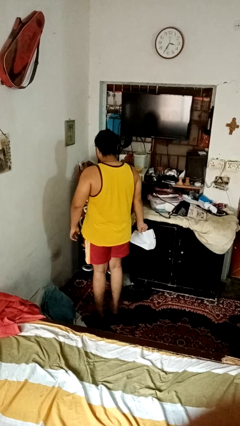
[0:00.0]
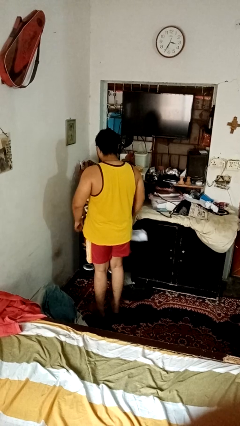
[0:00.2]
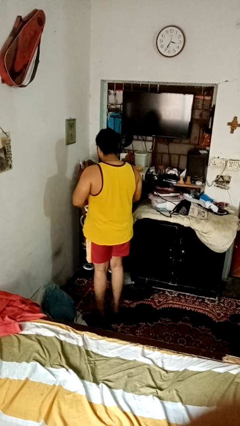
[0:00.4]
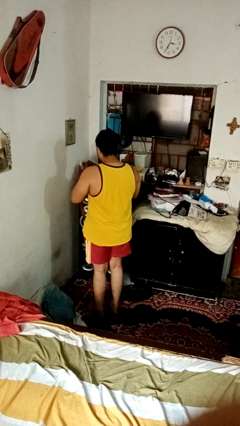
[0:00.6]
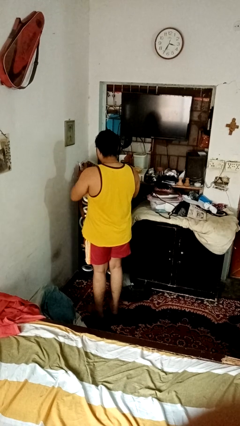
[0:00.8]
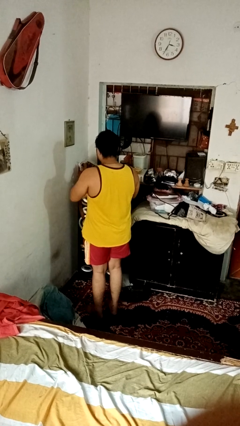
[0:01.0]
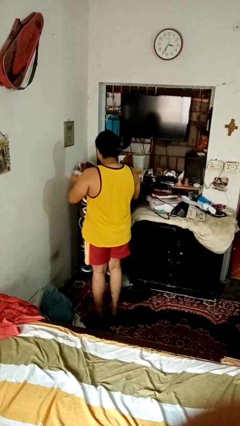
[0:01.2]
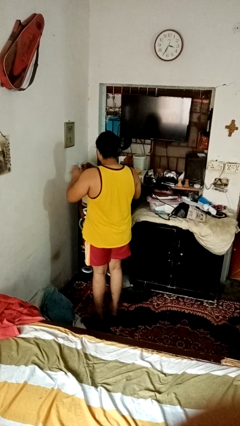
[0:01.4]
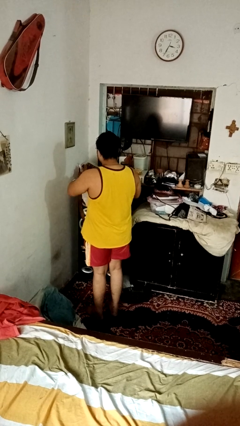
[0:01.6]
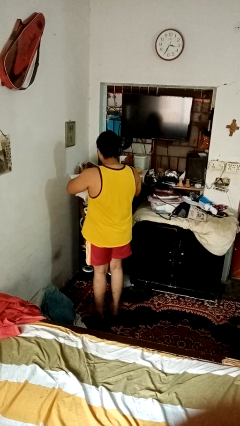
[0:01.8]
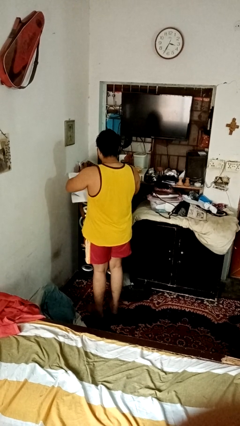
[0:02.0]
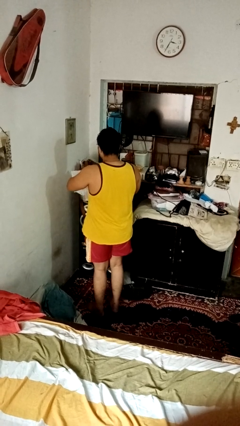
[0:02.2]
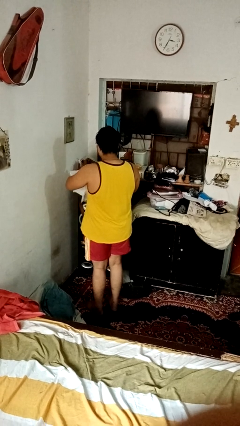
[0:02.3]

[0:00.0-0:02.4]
person tears paper

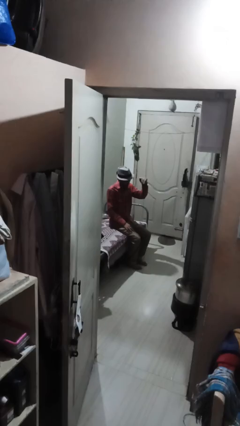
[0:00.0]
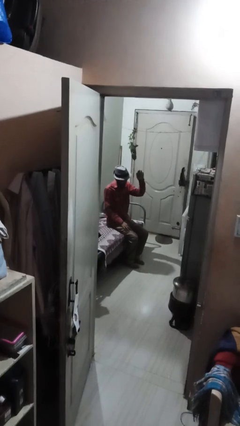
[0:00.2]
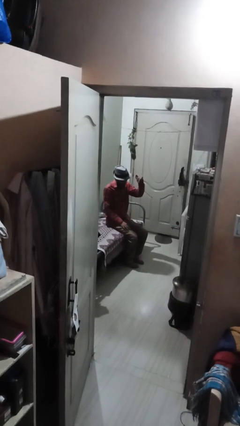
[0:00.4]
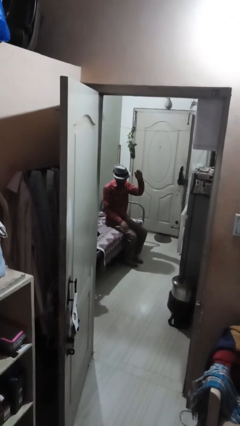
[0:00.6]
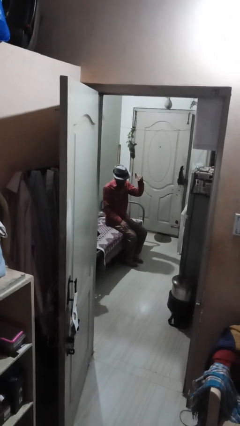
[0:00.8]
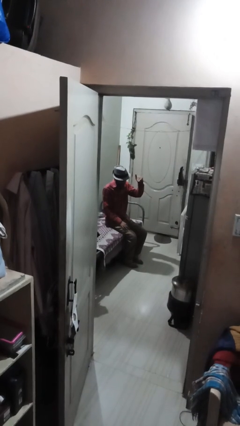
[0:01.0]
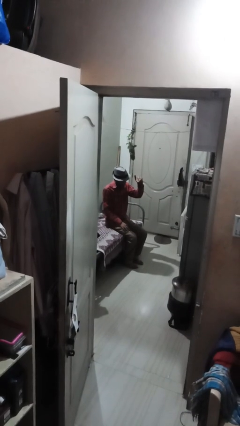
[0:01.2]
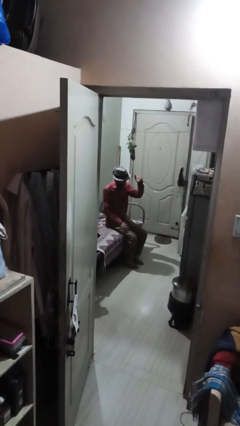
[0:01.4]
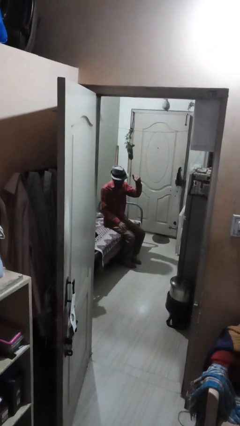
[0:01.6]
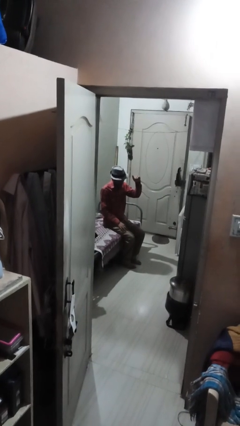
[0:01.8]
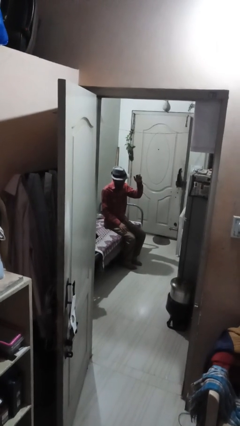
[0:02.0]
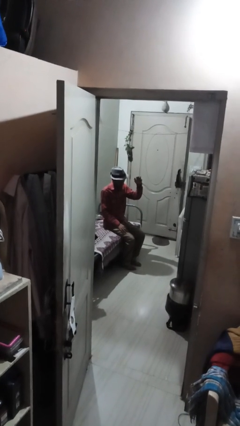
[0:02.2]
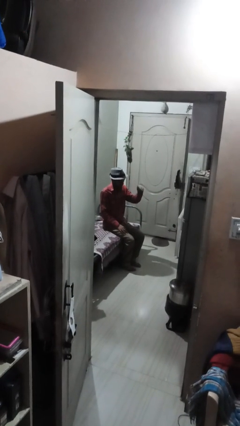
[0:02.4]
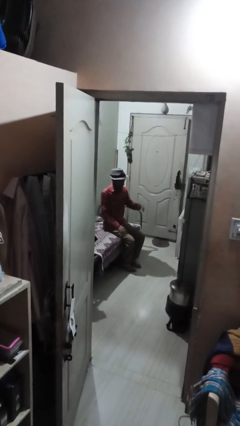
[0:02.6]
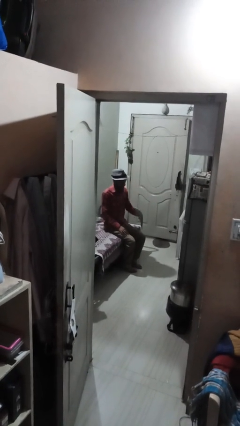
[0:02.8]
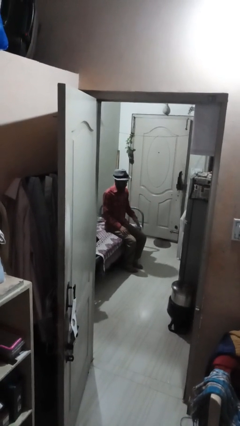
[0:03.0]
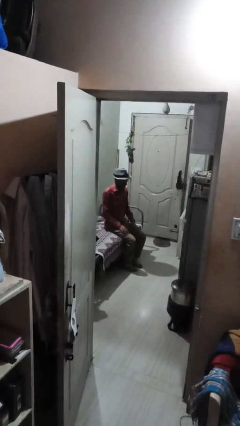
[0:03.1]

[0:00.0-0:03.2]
person gestures come here

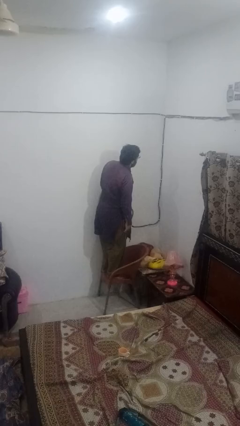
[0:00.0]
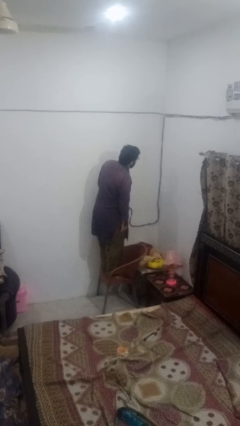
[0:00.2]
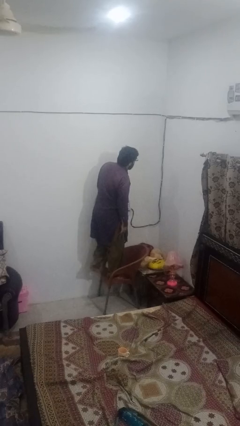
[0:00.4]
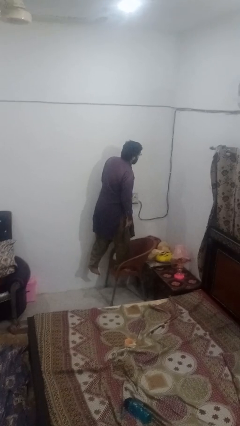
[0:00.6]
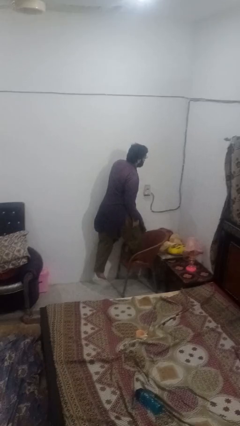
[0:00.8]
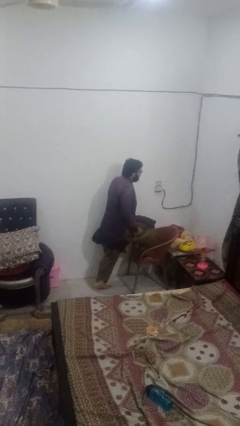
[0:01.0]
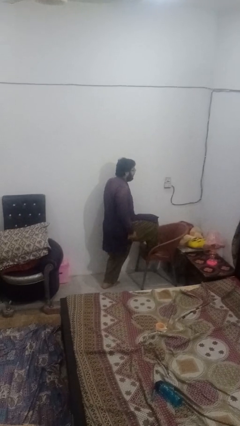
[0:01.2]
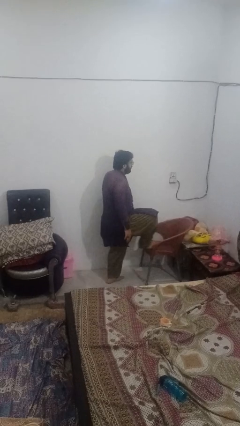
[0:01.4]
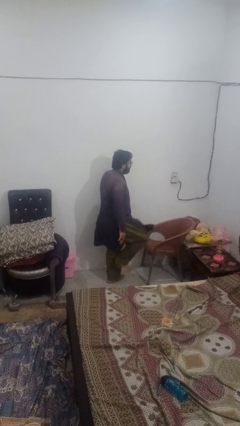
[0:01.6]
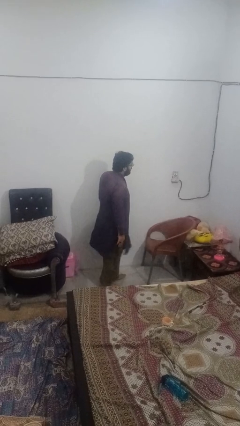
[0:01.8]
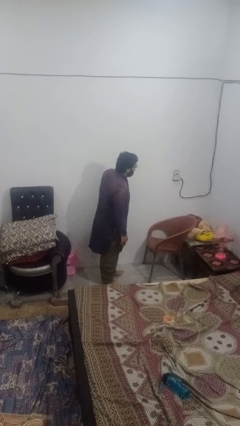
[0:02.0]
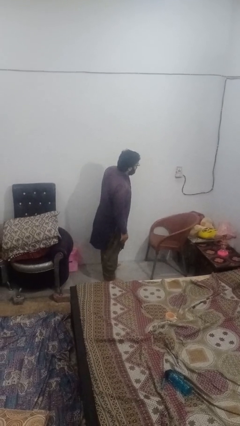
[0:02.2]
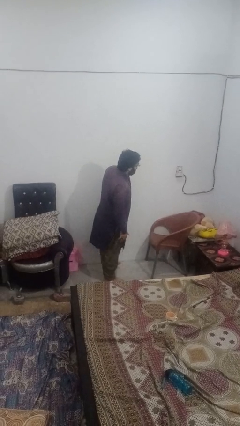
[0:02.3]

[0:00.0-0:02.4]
person climbs off chair

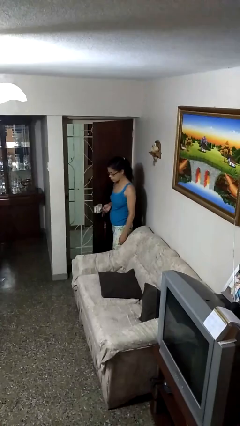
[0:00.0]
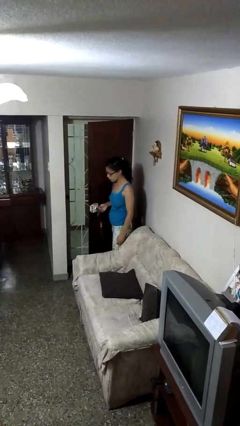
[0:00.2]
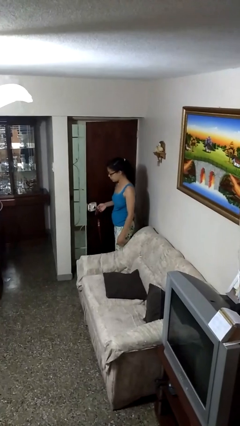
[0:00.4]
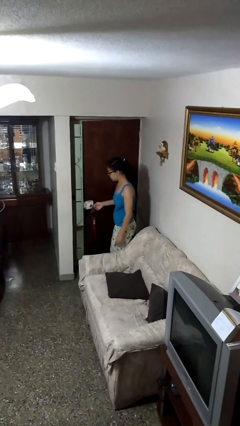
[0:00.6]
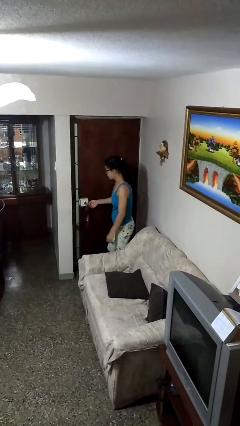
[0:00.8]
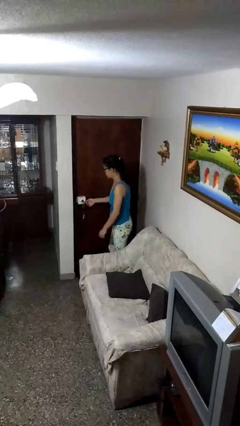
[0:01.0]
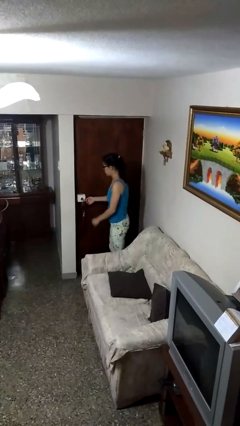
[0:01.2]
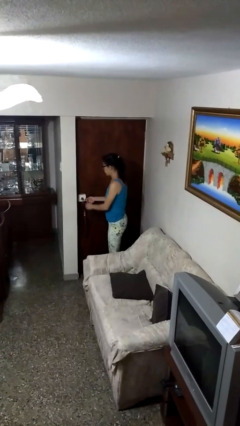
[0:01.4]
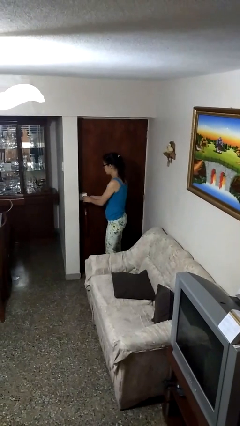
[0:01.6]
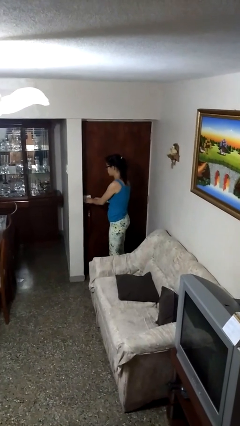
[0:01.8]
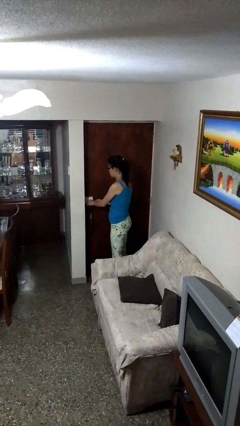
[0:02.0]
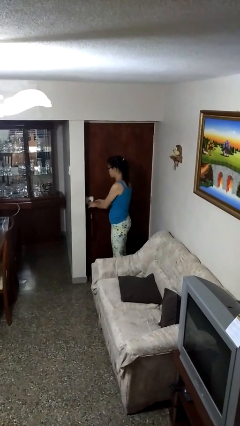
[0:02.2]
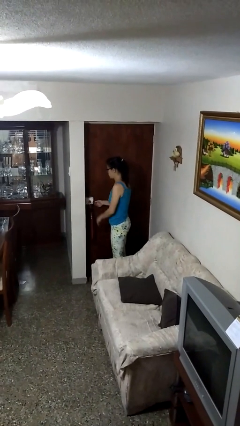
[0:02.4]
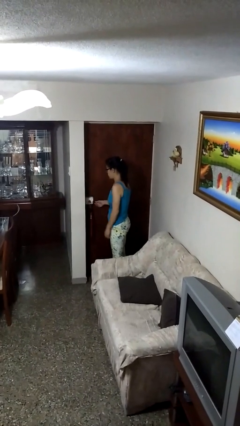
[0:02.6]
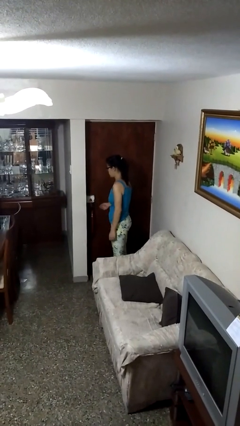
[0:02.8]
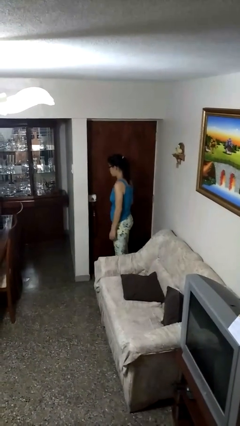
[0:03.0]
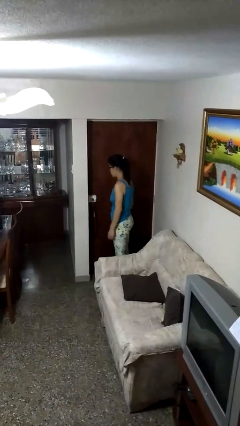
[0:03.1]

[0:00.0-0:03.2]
person closes facility door

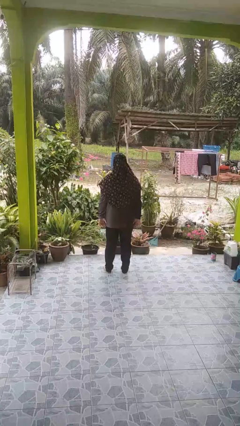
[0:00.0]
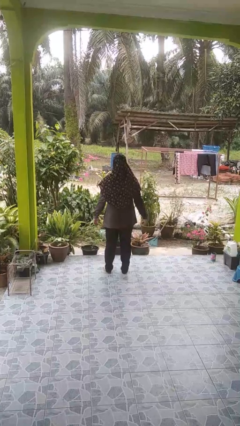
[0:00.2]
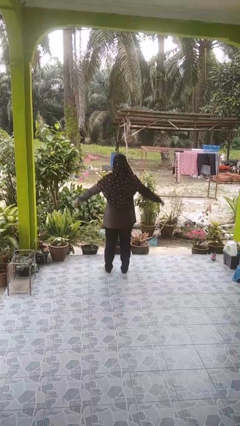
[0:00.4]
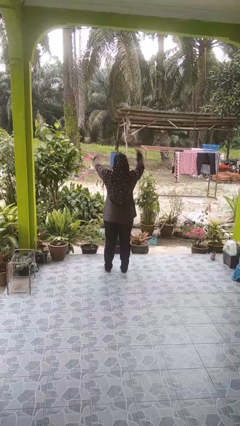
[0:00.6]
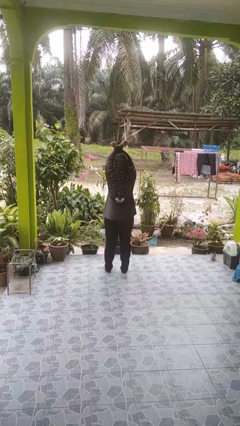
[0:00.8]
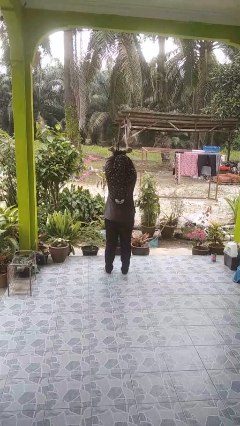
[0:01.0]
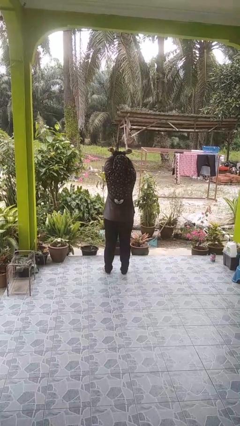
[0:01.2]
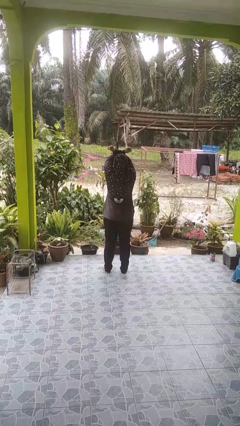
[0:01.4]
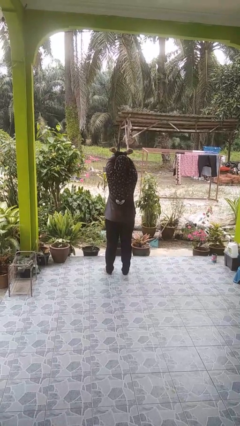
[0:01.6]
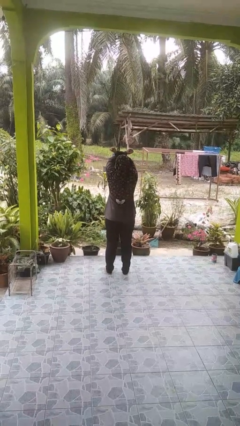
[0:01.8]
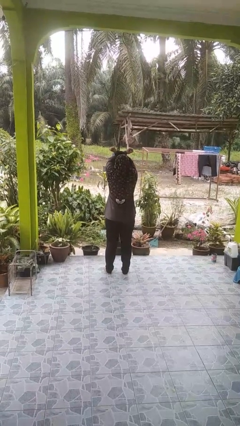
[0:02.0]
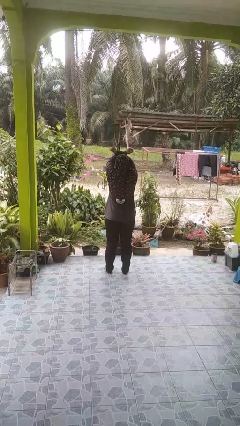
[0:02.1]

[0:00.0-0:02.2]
person crosses arms

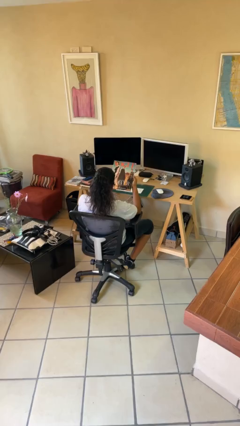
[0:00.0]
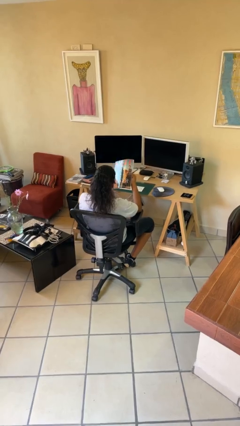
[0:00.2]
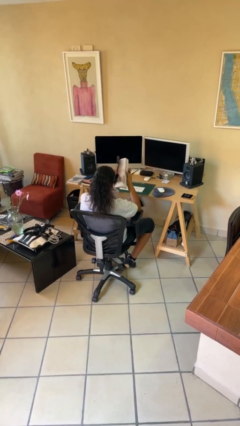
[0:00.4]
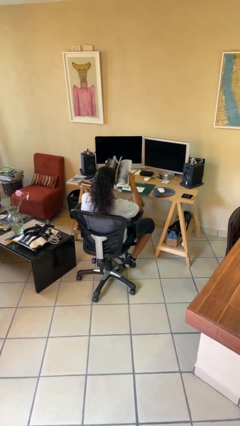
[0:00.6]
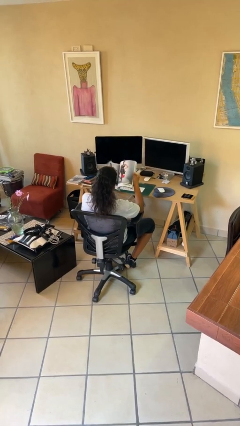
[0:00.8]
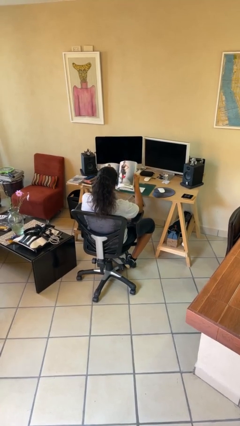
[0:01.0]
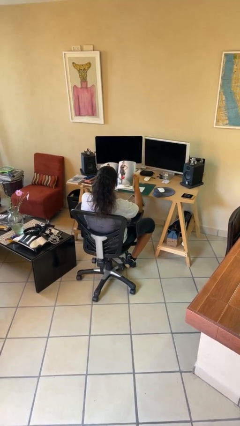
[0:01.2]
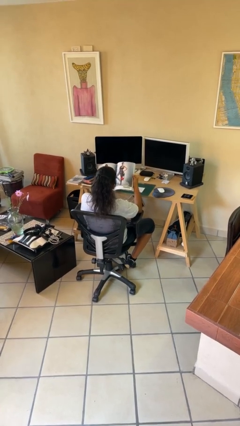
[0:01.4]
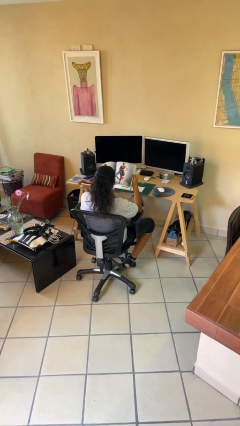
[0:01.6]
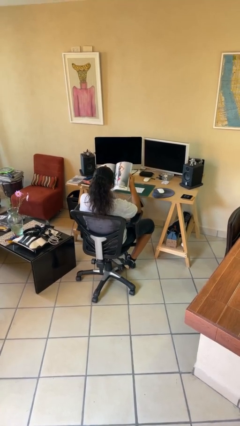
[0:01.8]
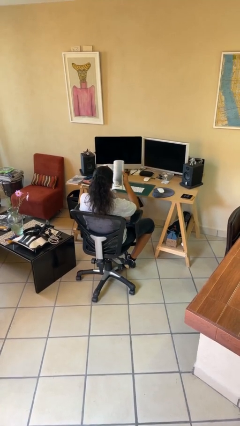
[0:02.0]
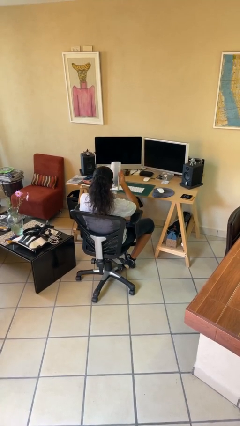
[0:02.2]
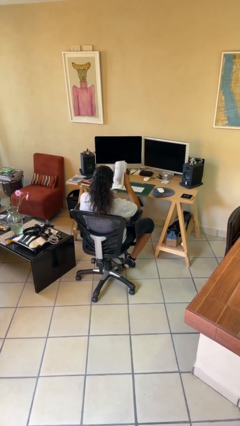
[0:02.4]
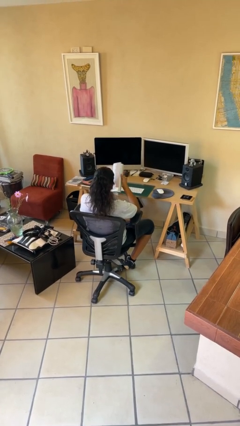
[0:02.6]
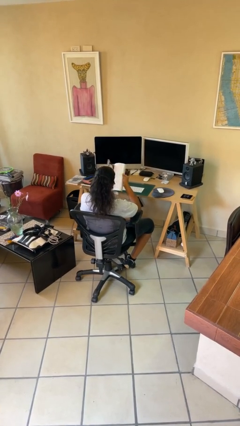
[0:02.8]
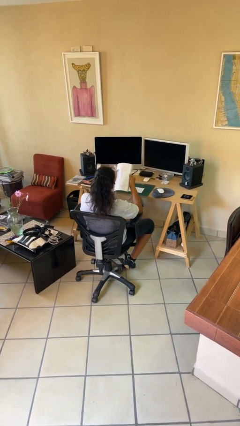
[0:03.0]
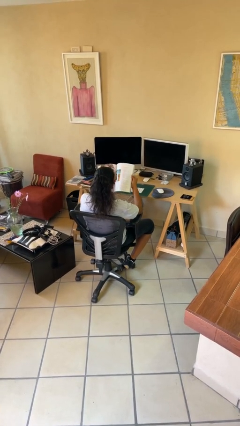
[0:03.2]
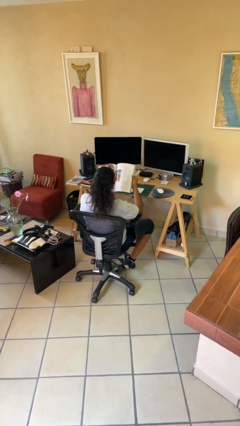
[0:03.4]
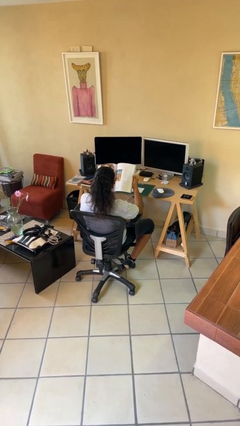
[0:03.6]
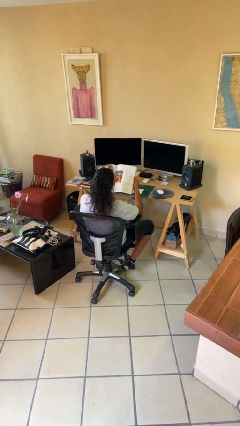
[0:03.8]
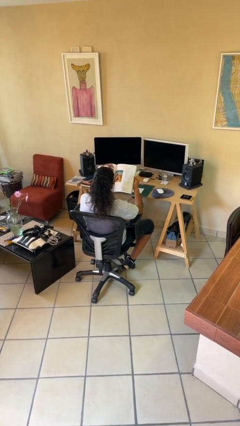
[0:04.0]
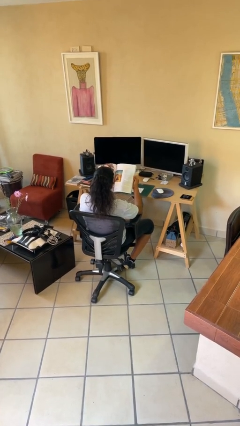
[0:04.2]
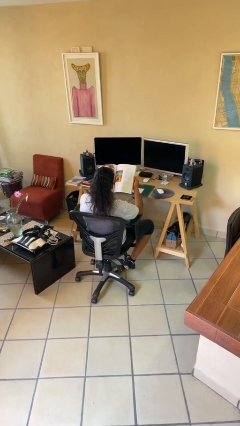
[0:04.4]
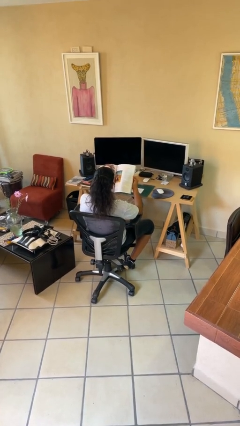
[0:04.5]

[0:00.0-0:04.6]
person reads magazine
